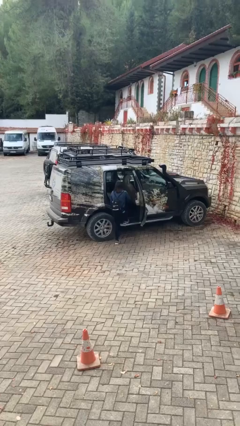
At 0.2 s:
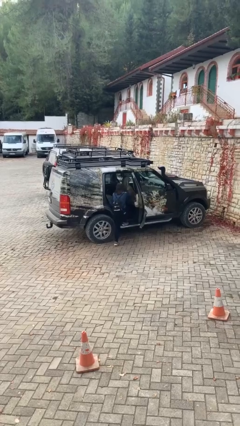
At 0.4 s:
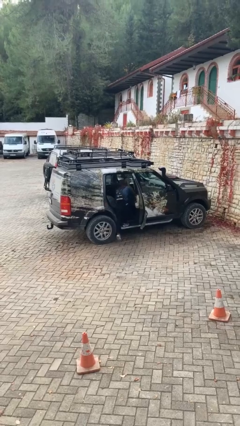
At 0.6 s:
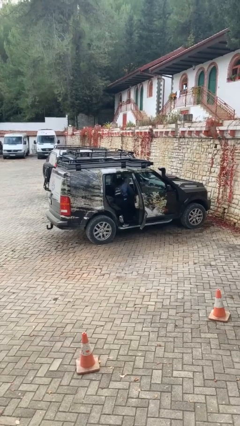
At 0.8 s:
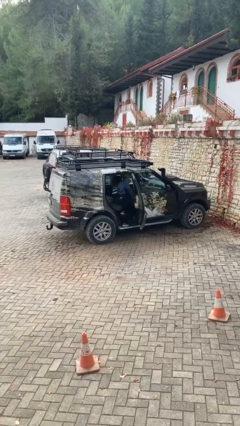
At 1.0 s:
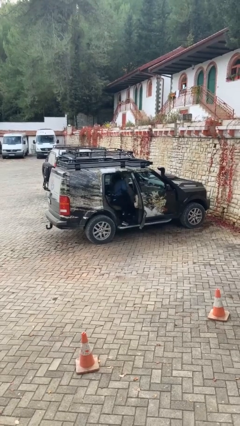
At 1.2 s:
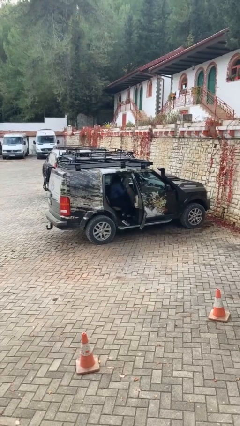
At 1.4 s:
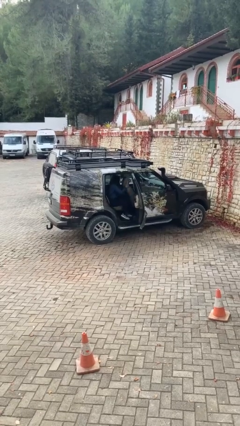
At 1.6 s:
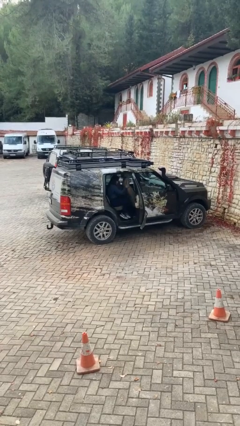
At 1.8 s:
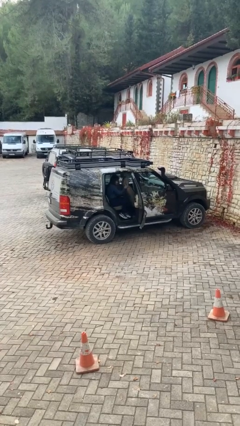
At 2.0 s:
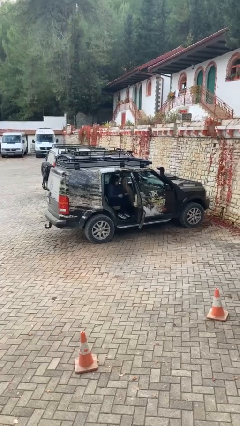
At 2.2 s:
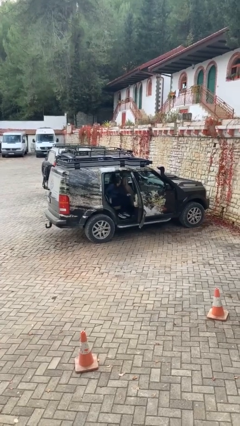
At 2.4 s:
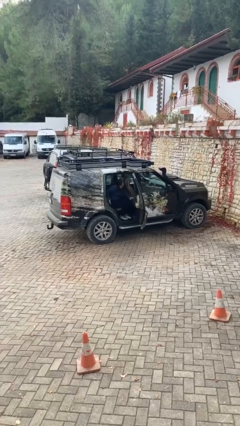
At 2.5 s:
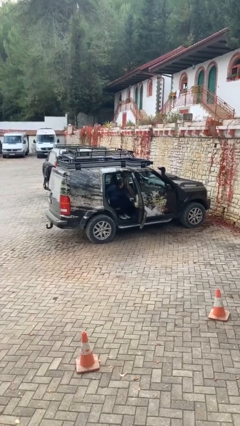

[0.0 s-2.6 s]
person enters car

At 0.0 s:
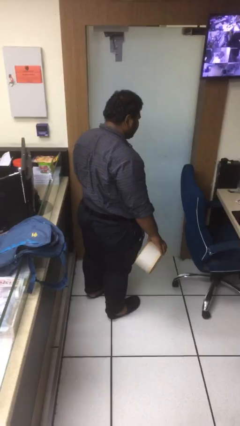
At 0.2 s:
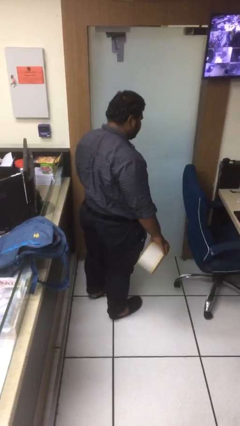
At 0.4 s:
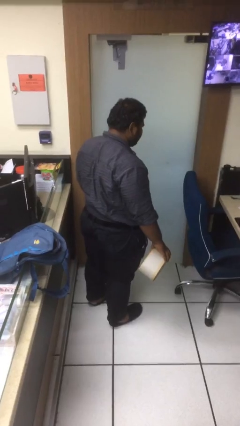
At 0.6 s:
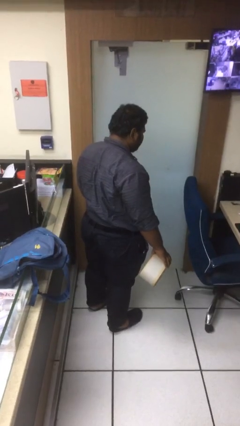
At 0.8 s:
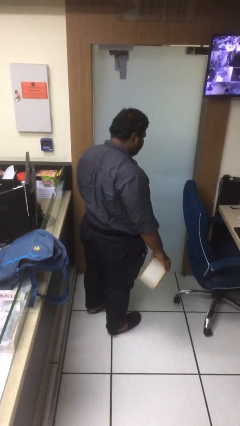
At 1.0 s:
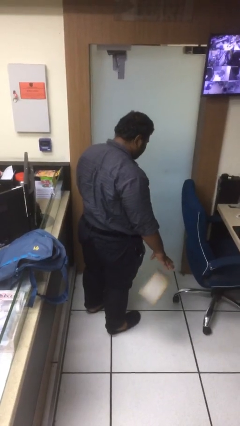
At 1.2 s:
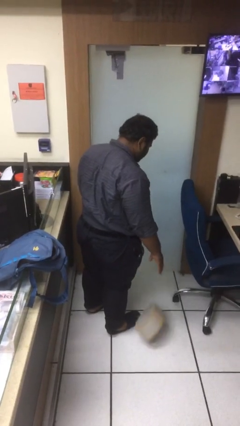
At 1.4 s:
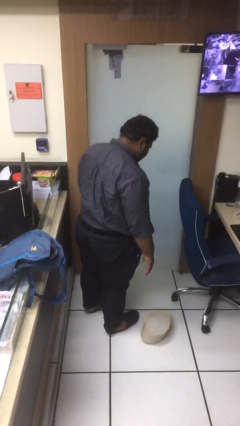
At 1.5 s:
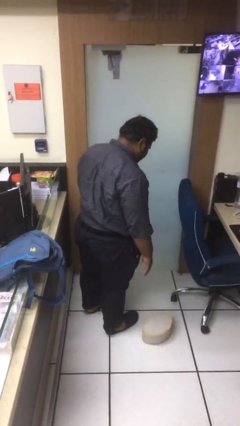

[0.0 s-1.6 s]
person drops object

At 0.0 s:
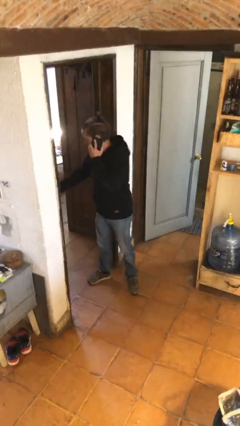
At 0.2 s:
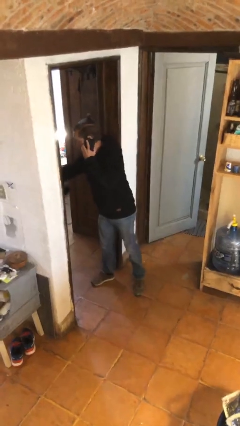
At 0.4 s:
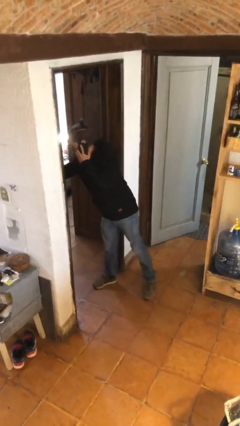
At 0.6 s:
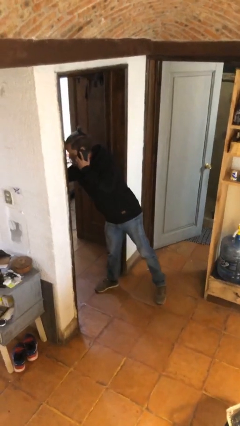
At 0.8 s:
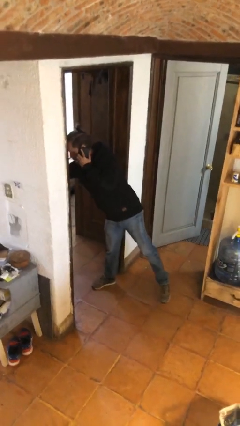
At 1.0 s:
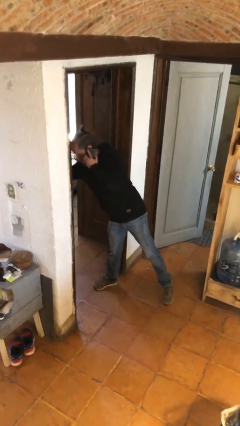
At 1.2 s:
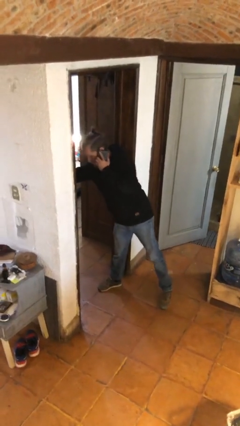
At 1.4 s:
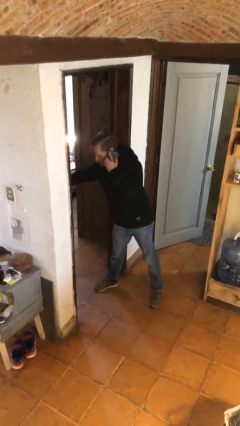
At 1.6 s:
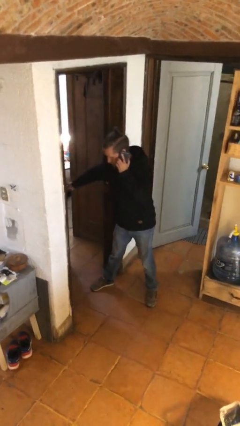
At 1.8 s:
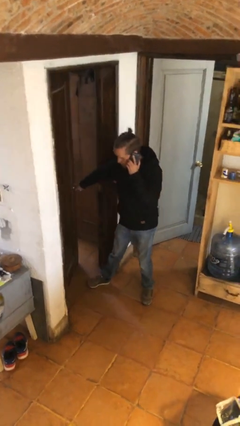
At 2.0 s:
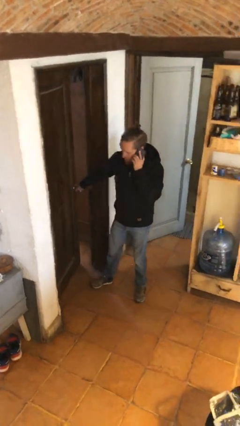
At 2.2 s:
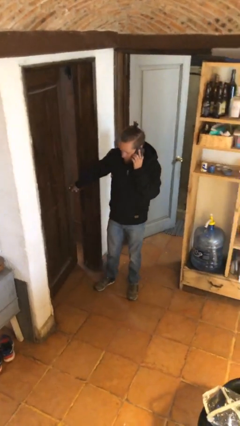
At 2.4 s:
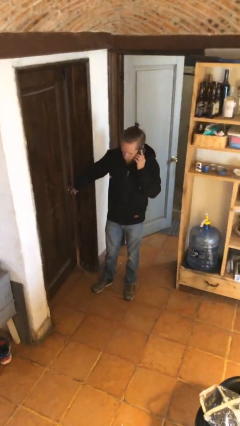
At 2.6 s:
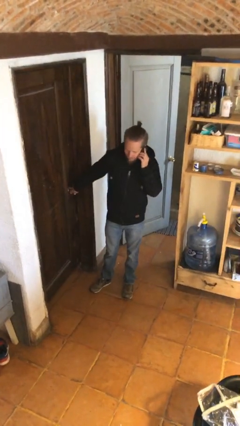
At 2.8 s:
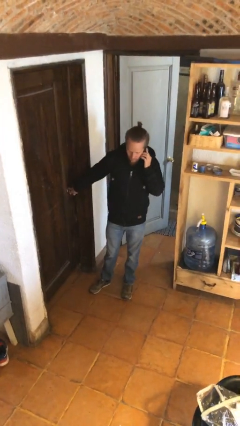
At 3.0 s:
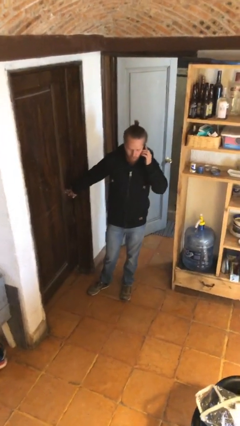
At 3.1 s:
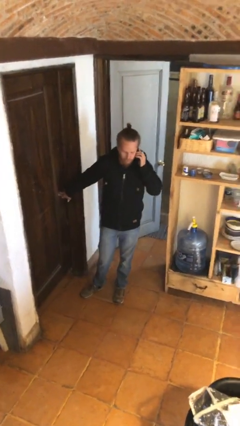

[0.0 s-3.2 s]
person closes facility door

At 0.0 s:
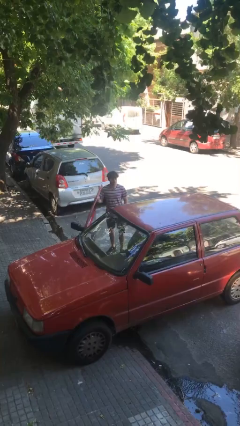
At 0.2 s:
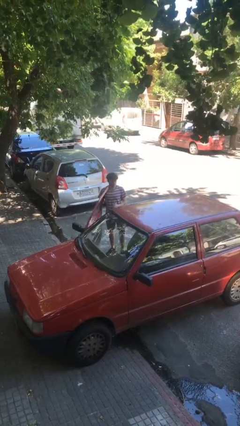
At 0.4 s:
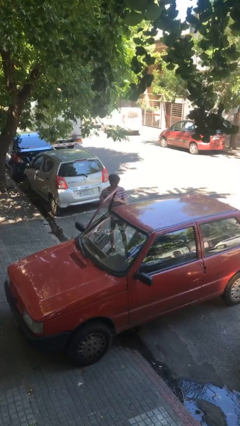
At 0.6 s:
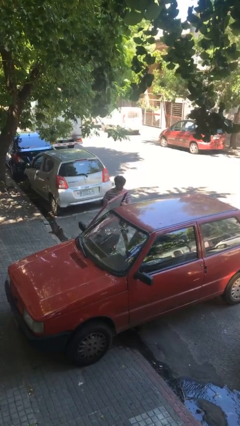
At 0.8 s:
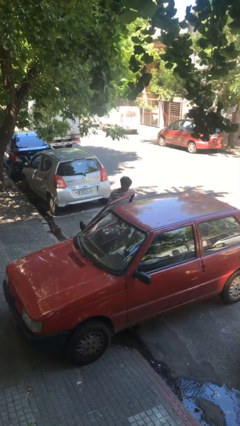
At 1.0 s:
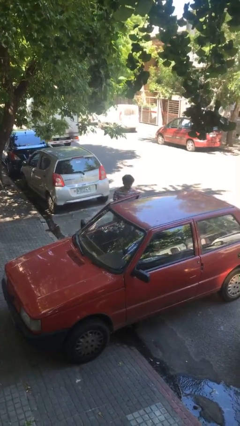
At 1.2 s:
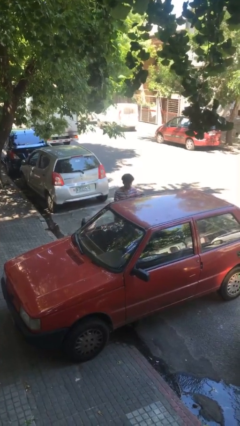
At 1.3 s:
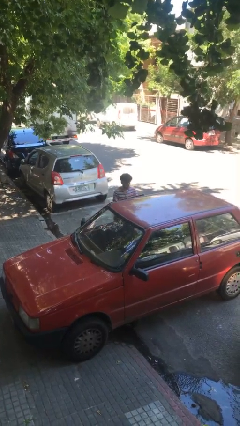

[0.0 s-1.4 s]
person closes car door

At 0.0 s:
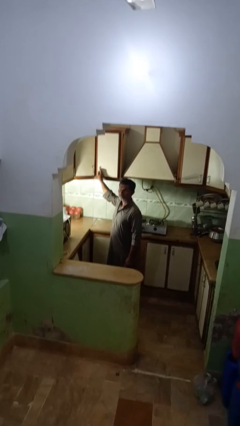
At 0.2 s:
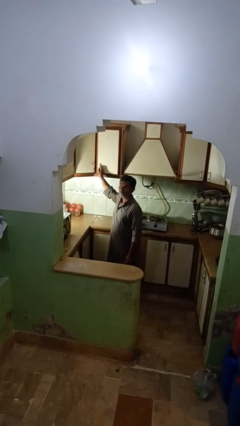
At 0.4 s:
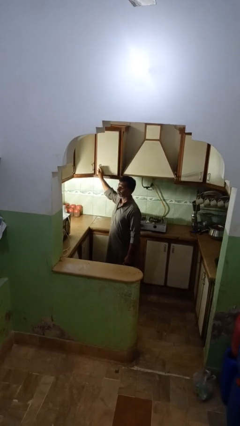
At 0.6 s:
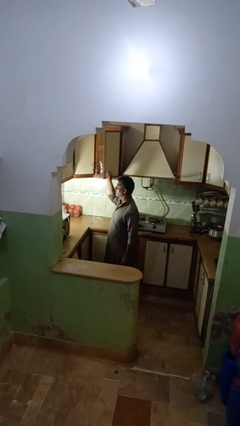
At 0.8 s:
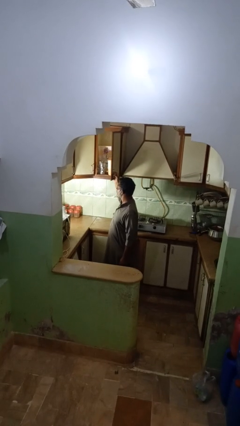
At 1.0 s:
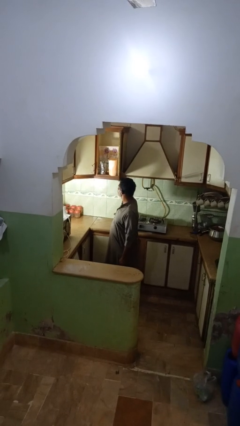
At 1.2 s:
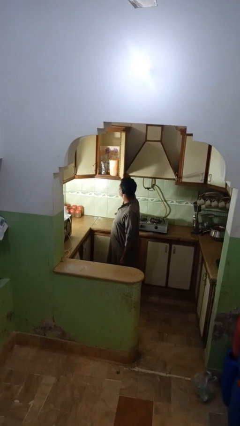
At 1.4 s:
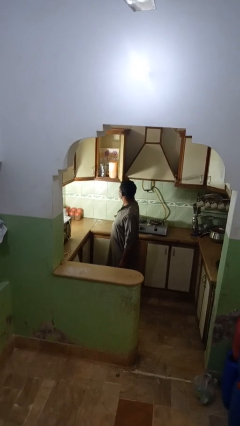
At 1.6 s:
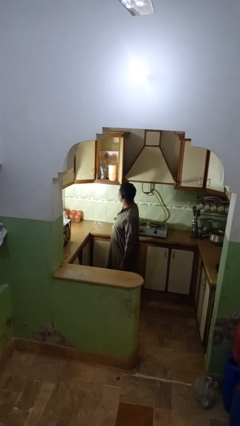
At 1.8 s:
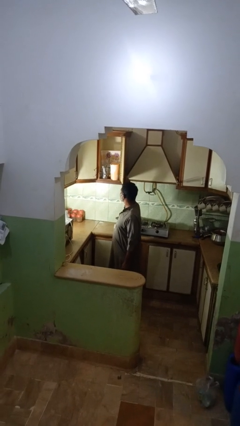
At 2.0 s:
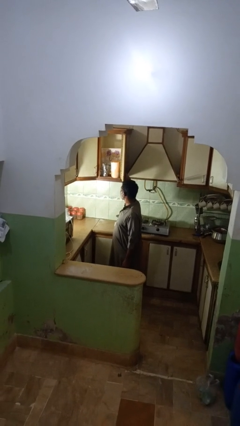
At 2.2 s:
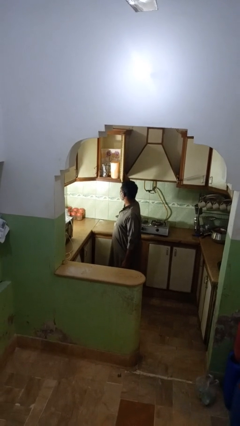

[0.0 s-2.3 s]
person opens kitchen drawer

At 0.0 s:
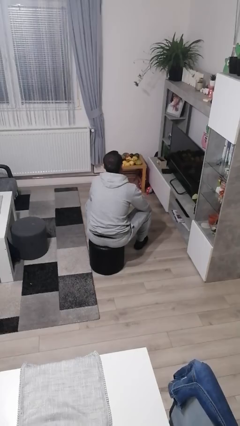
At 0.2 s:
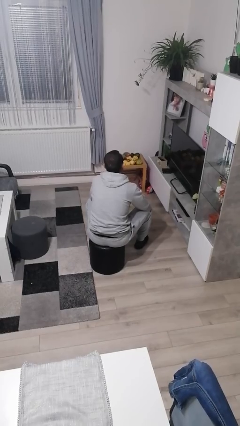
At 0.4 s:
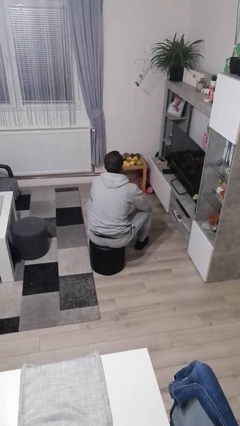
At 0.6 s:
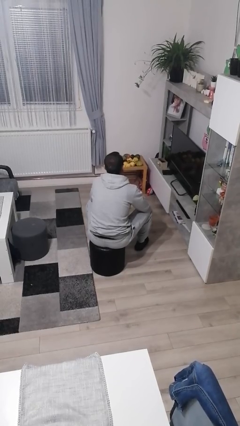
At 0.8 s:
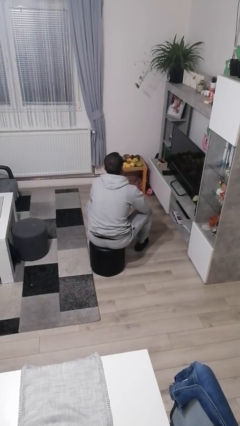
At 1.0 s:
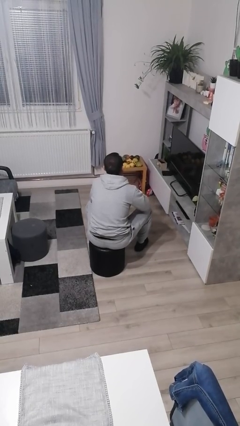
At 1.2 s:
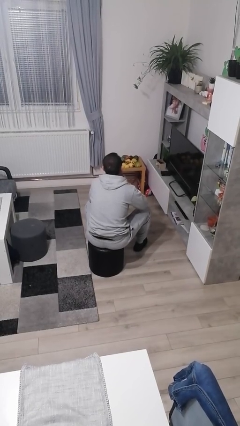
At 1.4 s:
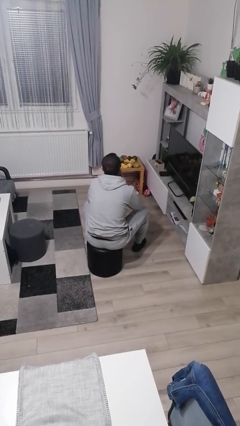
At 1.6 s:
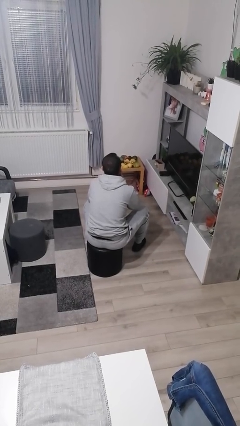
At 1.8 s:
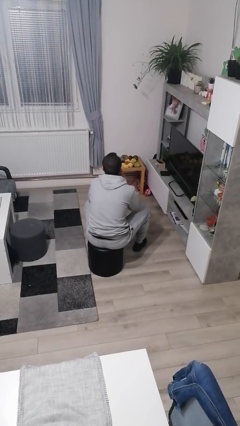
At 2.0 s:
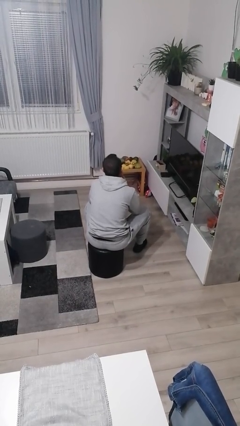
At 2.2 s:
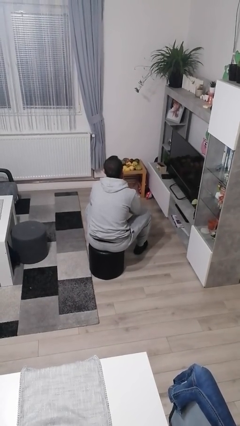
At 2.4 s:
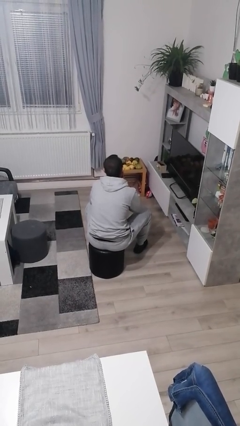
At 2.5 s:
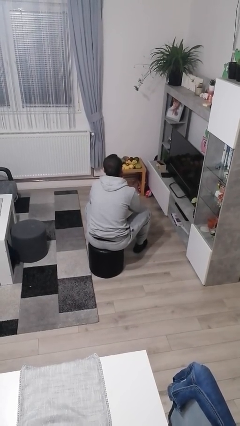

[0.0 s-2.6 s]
person strokes chin

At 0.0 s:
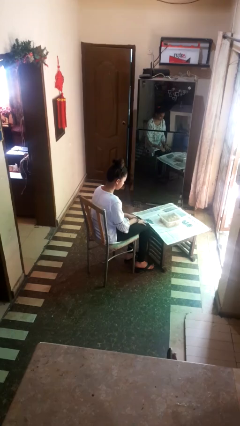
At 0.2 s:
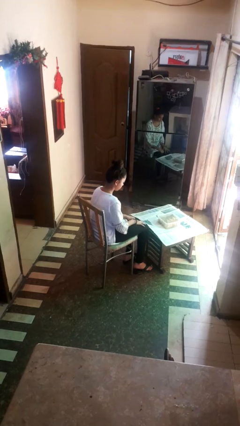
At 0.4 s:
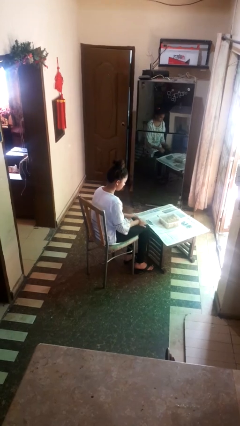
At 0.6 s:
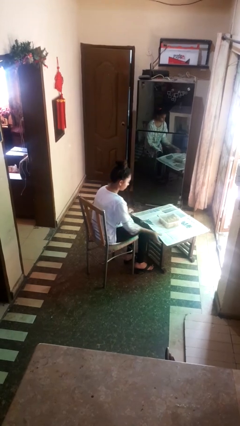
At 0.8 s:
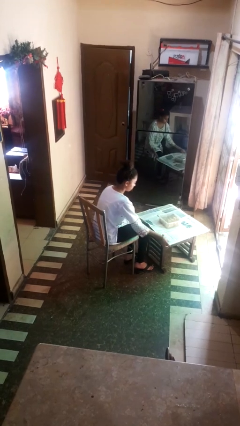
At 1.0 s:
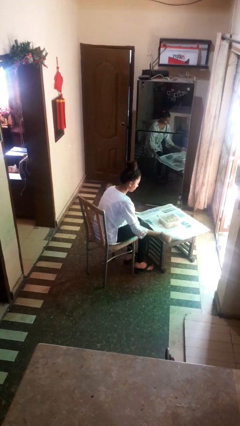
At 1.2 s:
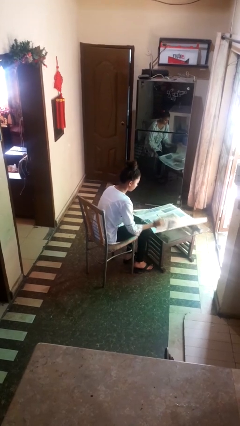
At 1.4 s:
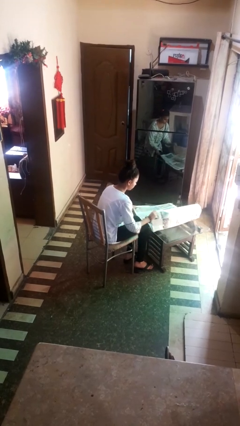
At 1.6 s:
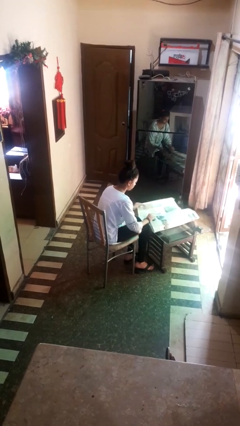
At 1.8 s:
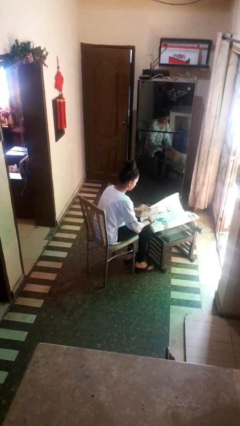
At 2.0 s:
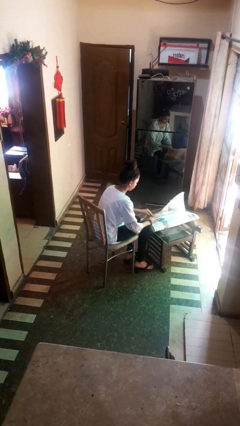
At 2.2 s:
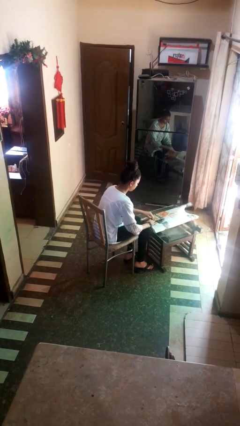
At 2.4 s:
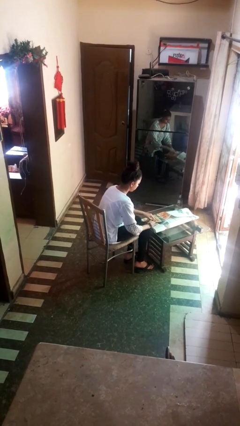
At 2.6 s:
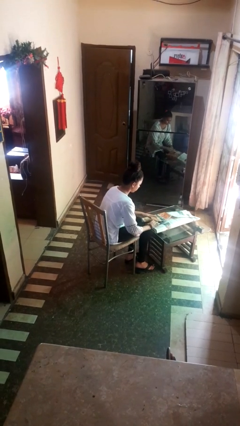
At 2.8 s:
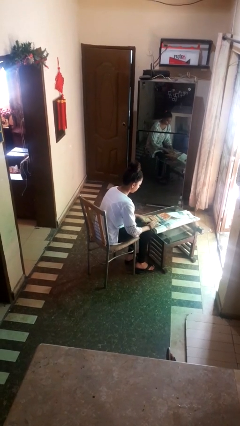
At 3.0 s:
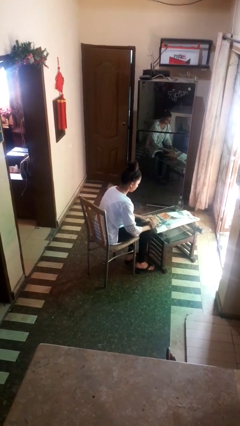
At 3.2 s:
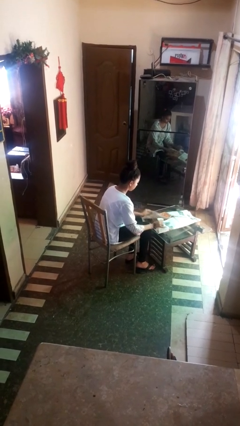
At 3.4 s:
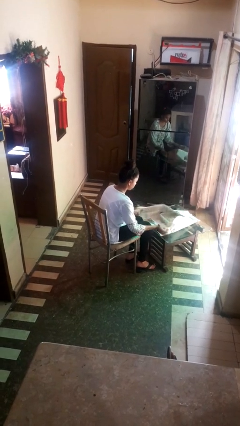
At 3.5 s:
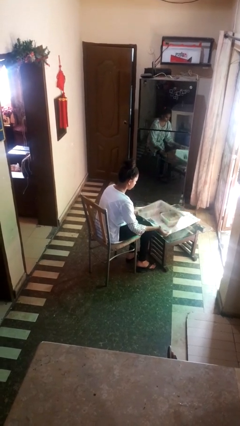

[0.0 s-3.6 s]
person wraps box
